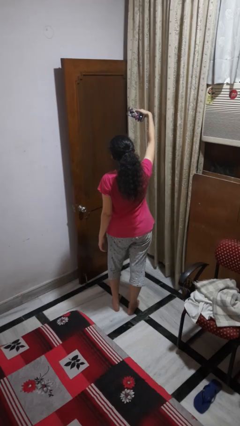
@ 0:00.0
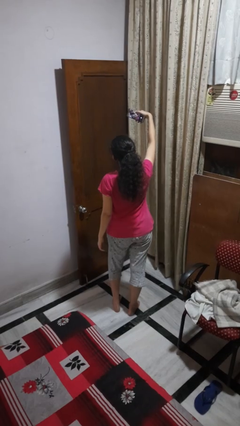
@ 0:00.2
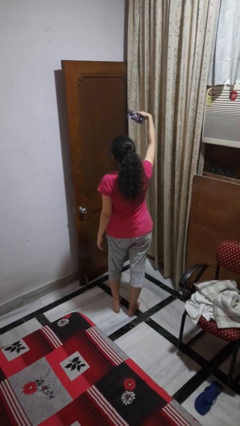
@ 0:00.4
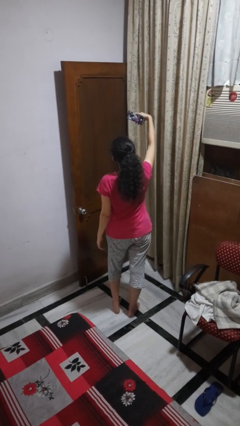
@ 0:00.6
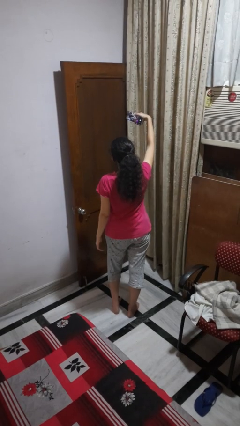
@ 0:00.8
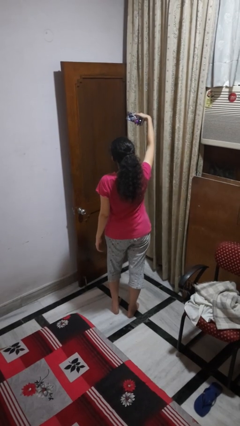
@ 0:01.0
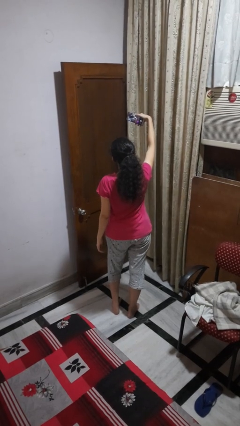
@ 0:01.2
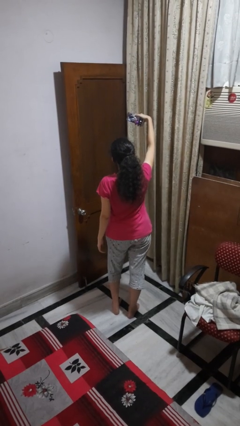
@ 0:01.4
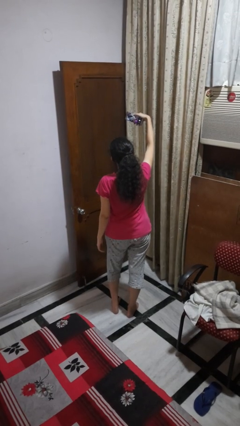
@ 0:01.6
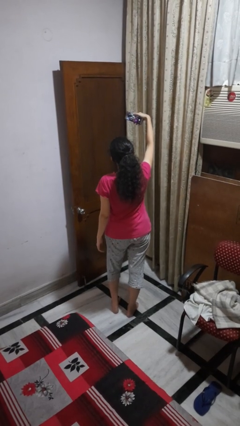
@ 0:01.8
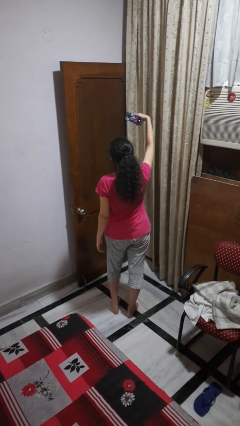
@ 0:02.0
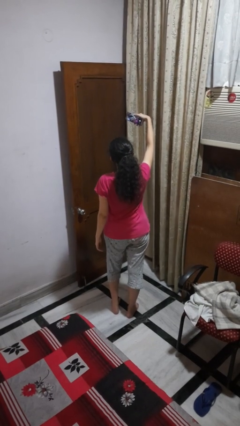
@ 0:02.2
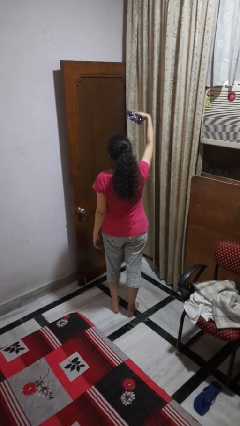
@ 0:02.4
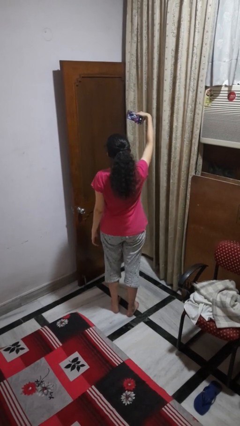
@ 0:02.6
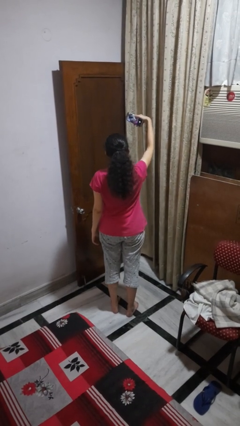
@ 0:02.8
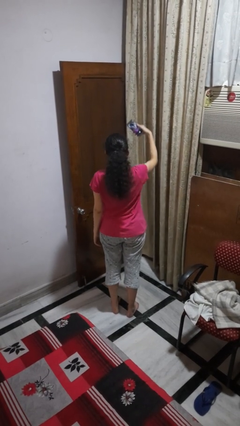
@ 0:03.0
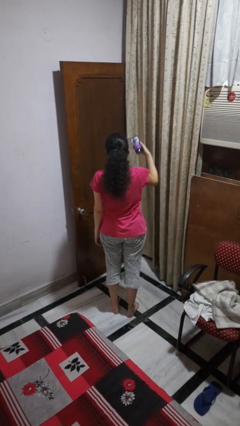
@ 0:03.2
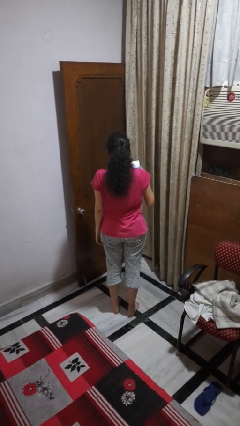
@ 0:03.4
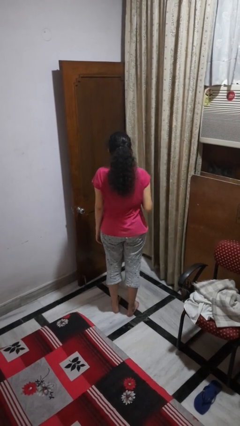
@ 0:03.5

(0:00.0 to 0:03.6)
person takes selfie

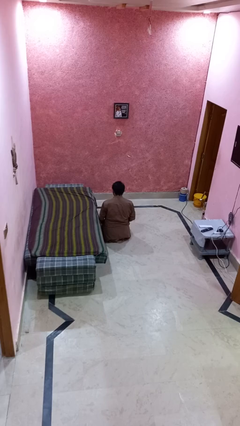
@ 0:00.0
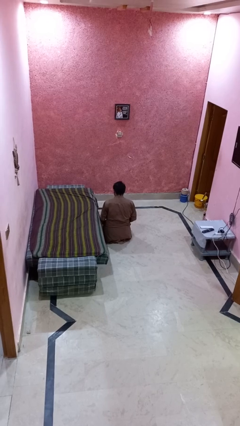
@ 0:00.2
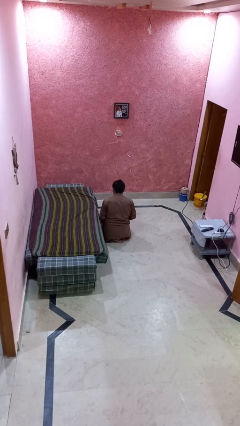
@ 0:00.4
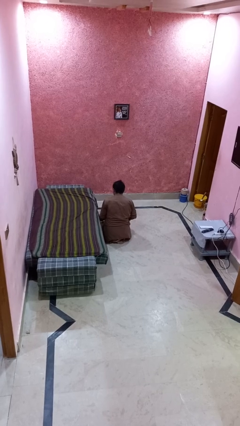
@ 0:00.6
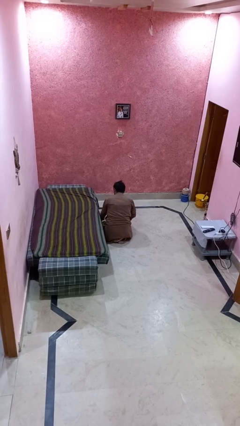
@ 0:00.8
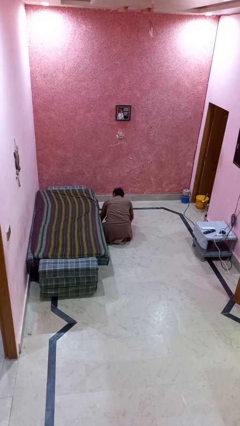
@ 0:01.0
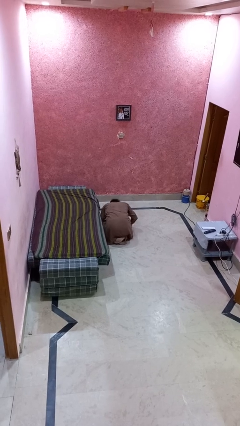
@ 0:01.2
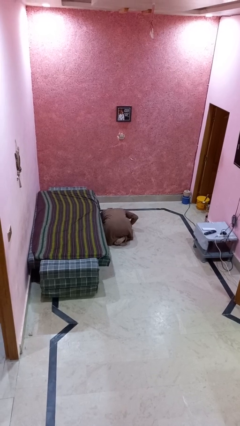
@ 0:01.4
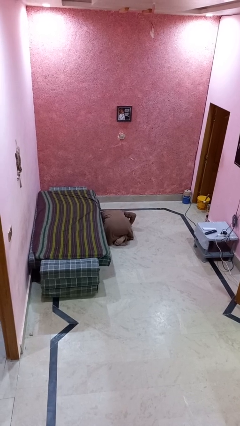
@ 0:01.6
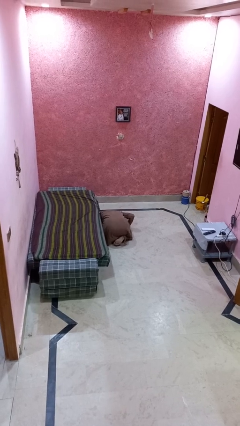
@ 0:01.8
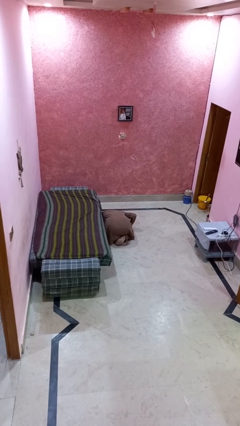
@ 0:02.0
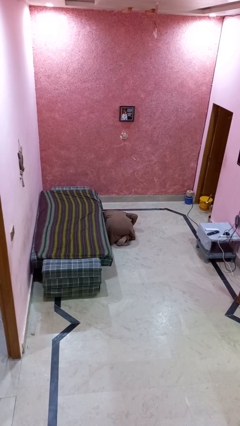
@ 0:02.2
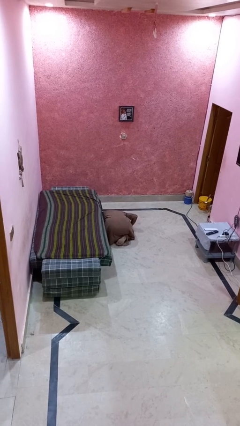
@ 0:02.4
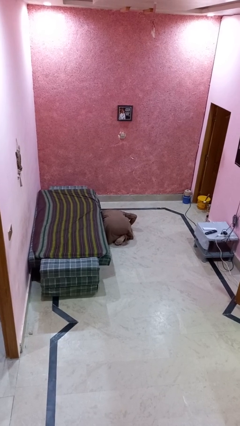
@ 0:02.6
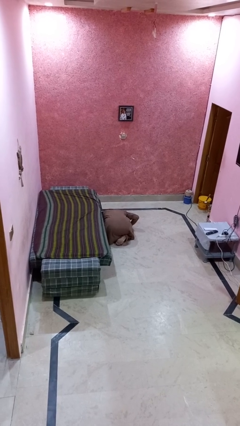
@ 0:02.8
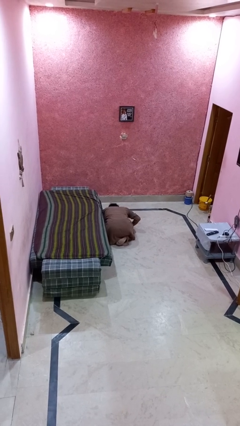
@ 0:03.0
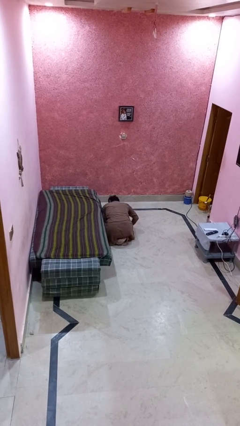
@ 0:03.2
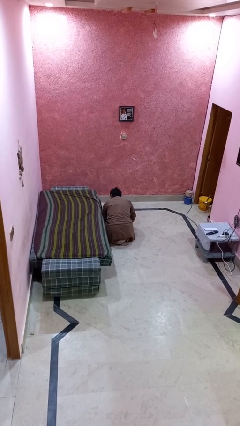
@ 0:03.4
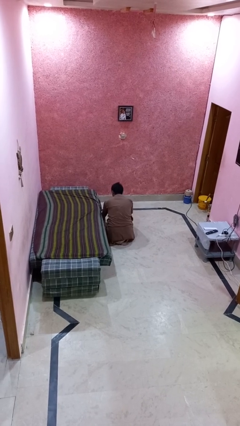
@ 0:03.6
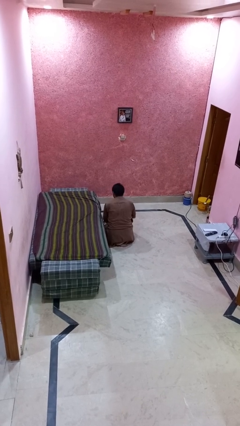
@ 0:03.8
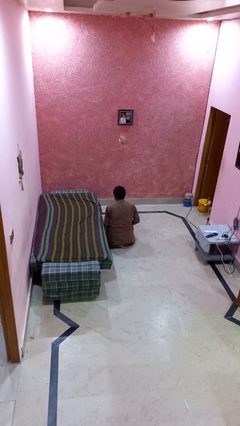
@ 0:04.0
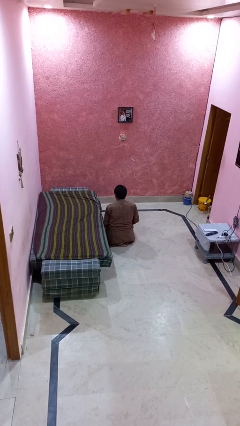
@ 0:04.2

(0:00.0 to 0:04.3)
person searches under bed

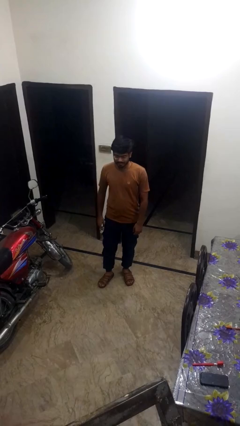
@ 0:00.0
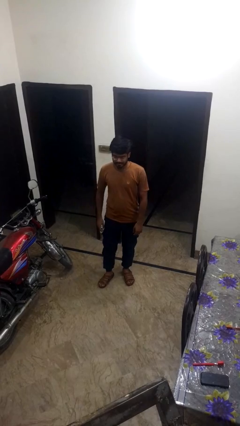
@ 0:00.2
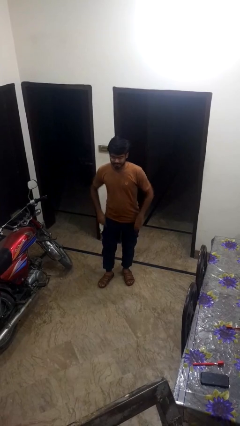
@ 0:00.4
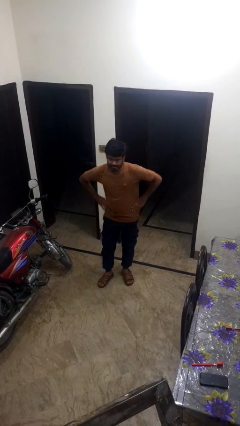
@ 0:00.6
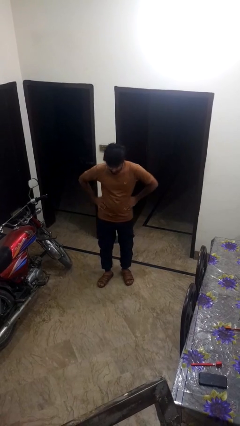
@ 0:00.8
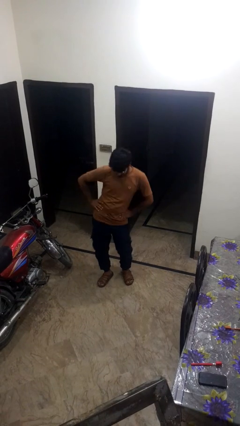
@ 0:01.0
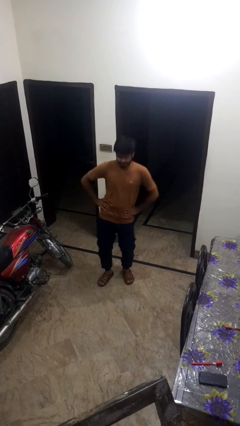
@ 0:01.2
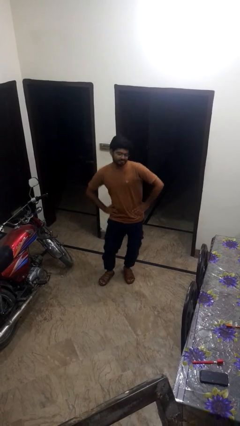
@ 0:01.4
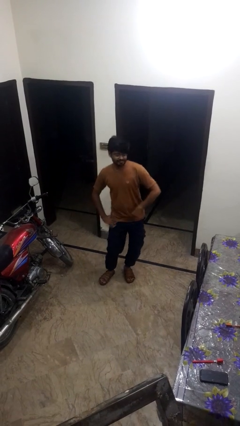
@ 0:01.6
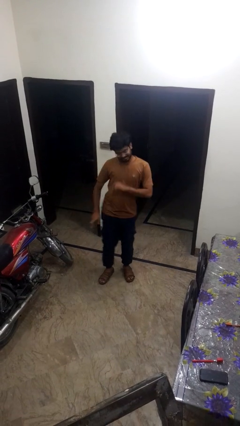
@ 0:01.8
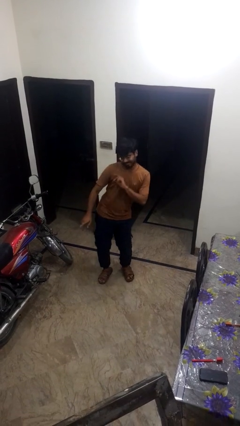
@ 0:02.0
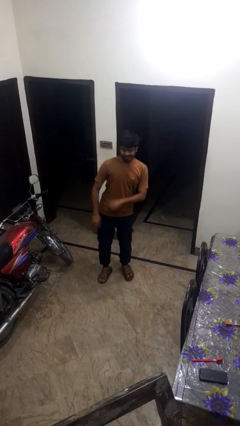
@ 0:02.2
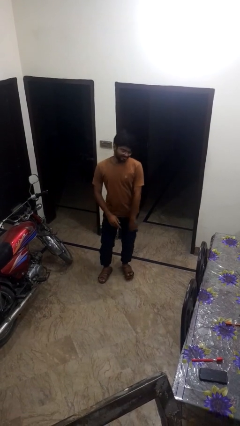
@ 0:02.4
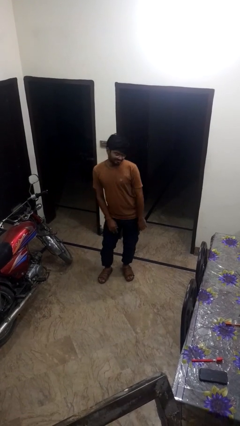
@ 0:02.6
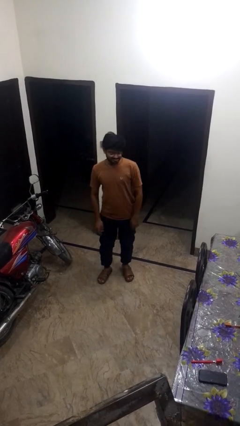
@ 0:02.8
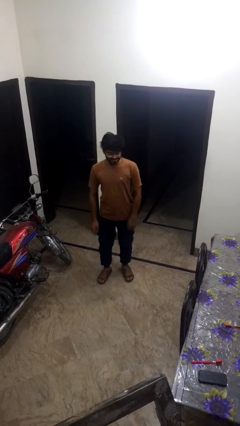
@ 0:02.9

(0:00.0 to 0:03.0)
person dances in place

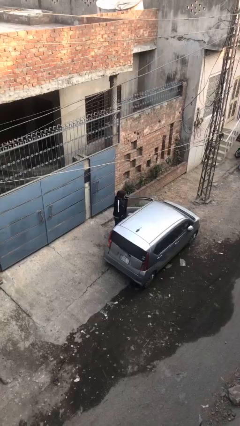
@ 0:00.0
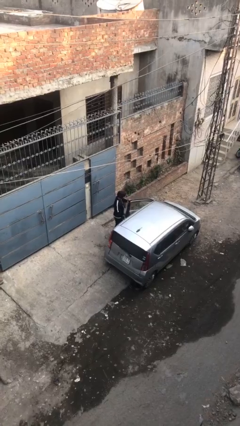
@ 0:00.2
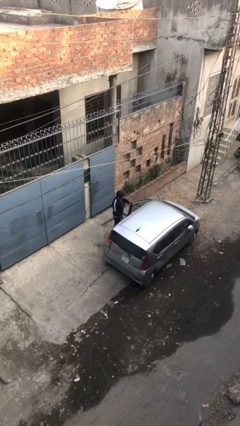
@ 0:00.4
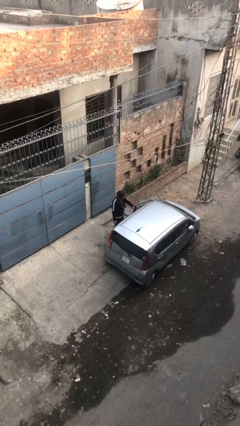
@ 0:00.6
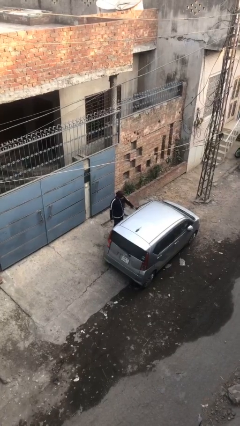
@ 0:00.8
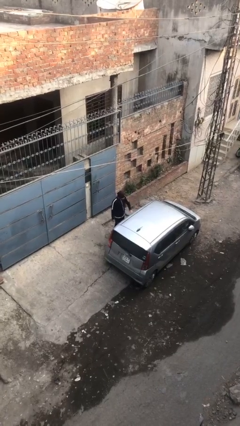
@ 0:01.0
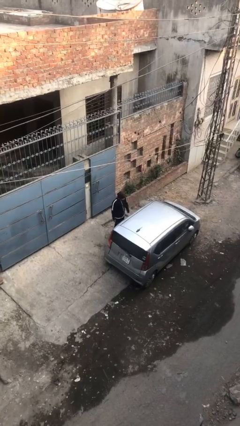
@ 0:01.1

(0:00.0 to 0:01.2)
person closes car door

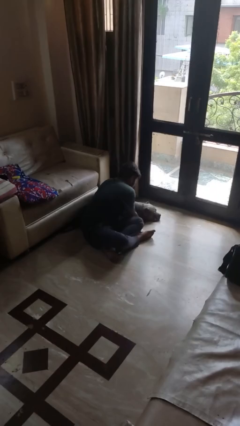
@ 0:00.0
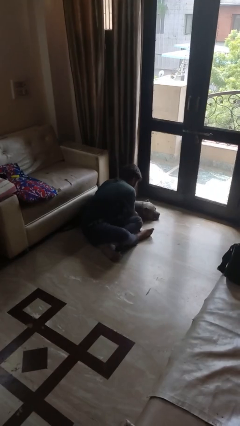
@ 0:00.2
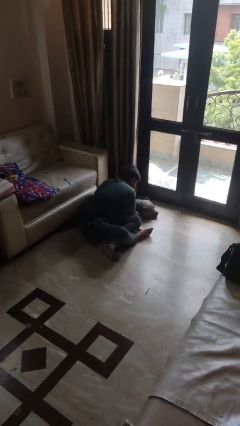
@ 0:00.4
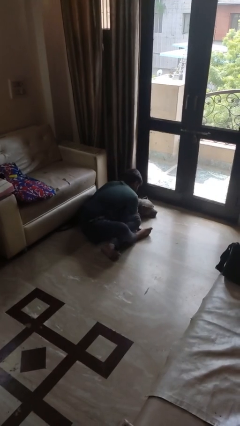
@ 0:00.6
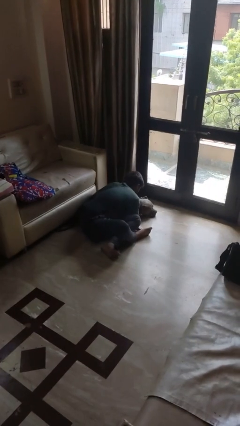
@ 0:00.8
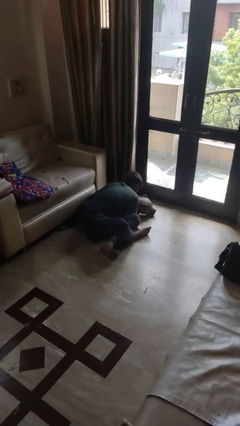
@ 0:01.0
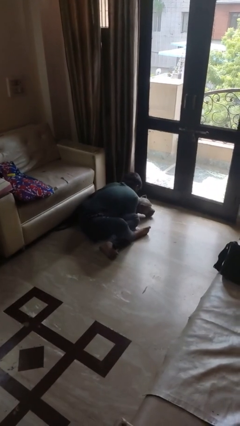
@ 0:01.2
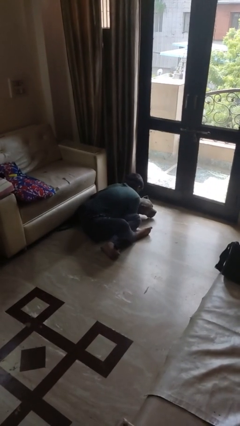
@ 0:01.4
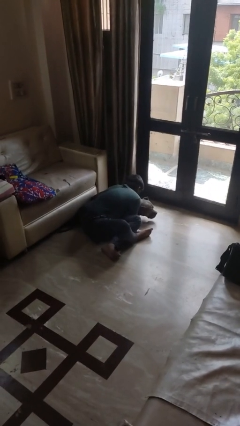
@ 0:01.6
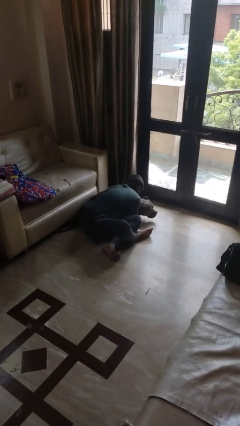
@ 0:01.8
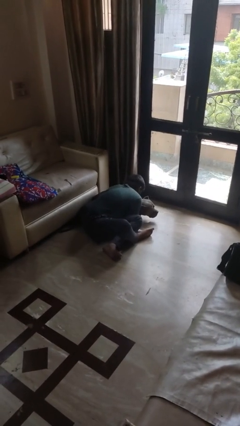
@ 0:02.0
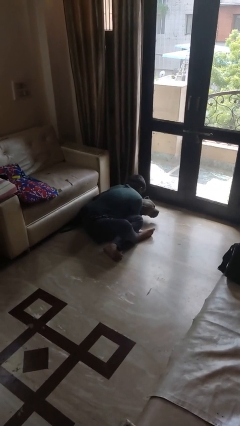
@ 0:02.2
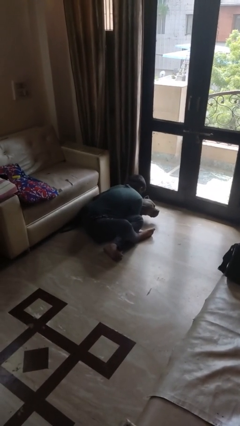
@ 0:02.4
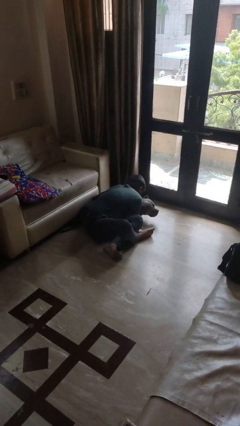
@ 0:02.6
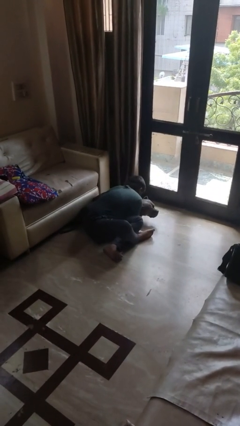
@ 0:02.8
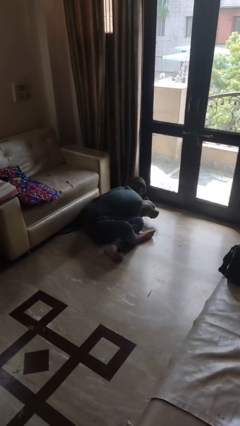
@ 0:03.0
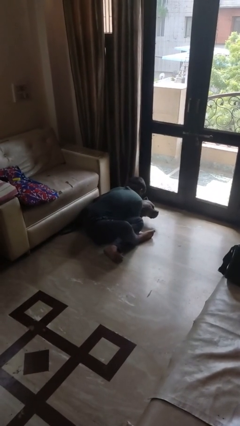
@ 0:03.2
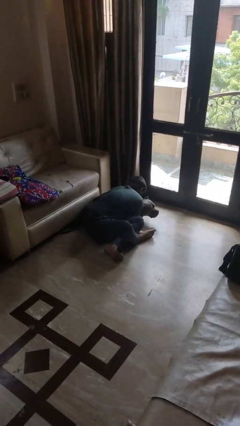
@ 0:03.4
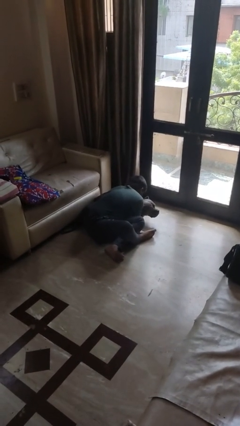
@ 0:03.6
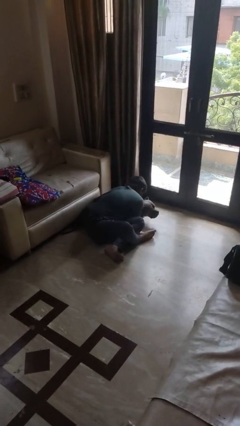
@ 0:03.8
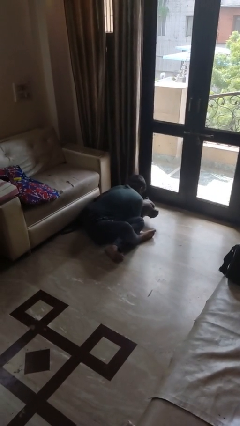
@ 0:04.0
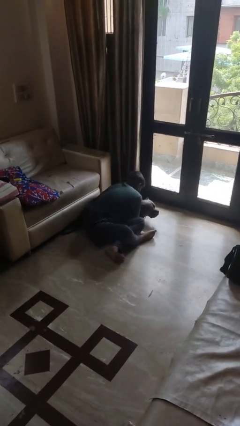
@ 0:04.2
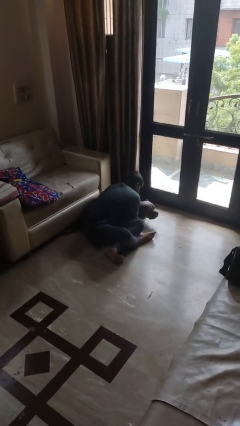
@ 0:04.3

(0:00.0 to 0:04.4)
person hugs dog

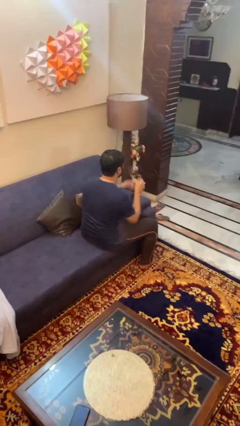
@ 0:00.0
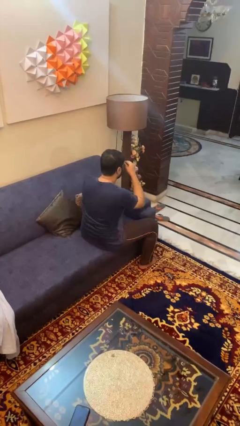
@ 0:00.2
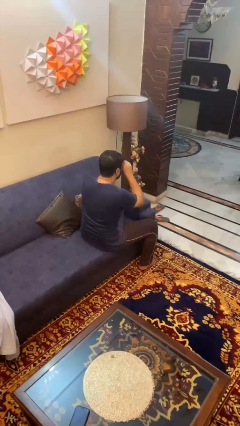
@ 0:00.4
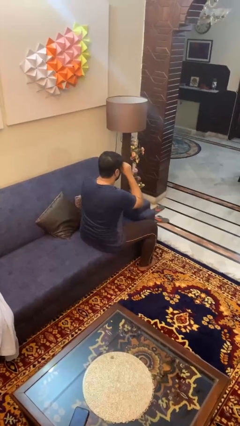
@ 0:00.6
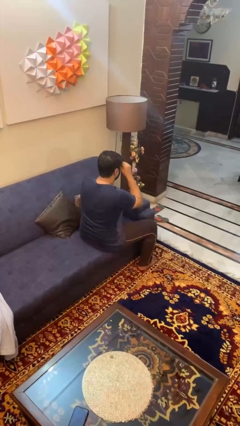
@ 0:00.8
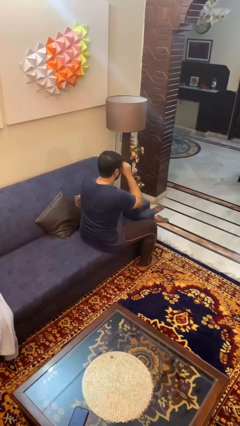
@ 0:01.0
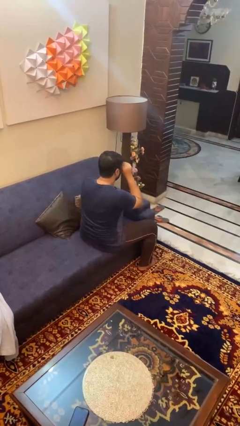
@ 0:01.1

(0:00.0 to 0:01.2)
person rubs eyes
